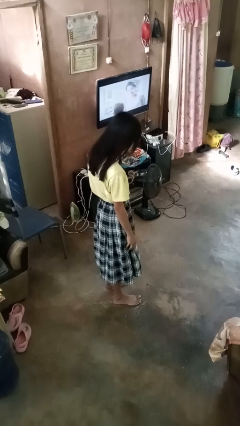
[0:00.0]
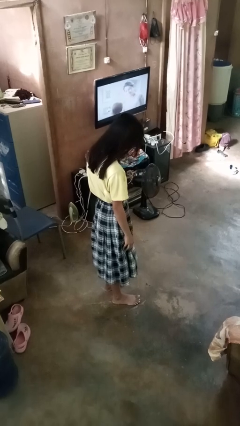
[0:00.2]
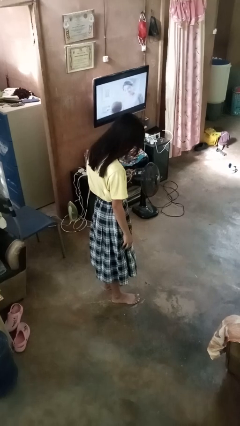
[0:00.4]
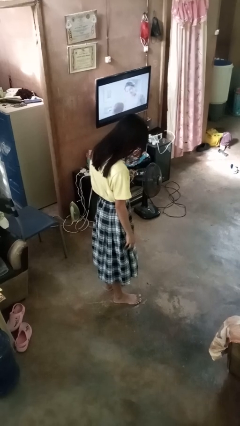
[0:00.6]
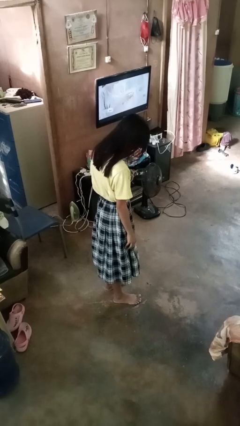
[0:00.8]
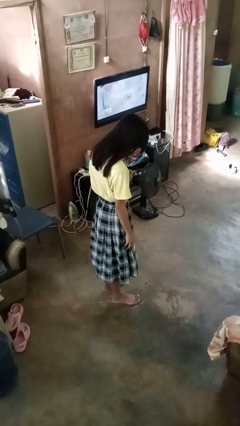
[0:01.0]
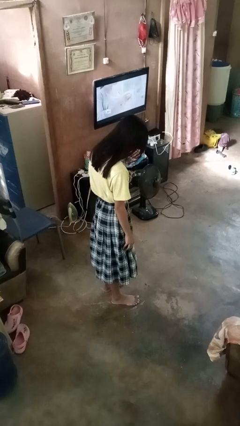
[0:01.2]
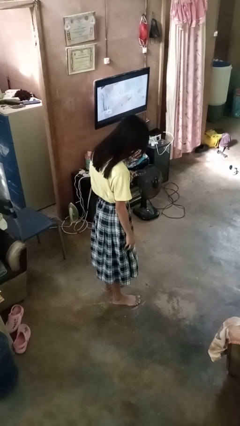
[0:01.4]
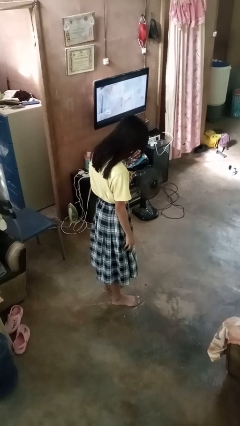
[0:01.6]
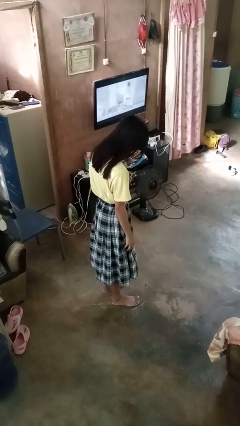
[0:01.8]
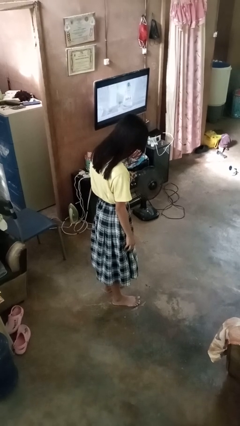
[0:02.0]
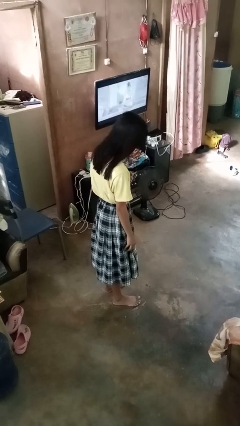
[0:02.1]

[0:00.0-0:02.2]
person bows

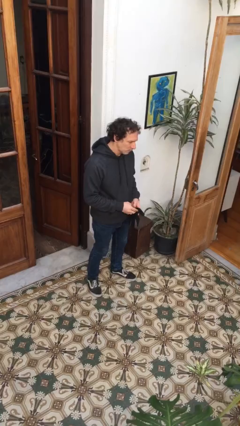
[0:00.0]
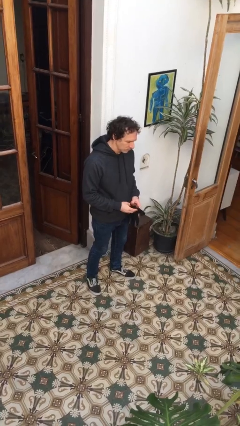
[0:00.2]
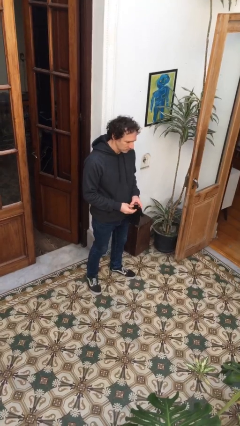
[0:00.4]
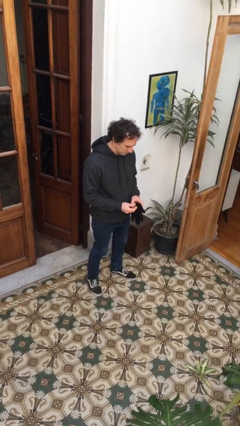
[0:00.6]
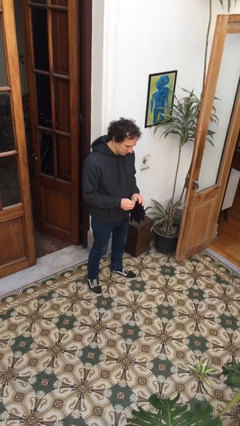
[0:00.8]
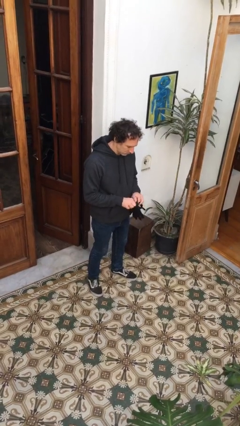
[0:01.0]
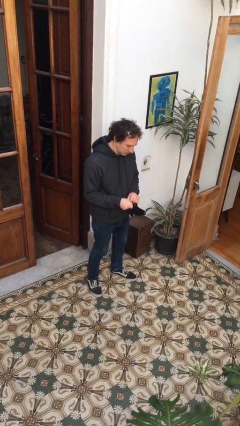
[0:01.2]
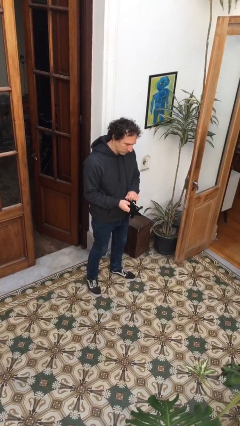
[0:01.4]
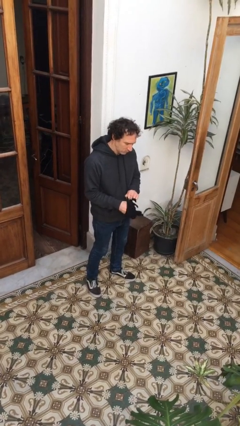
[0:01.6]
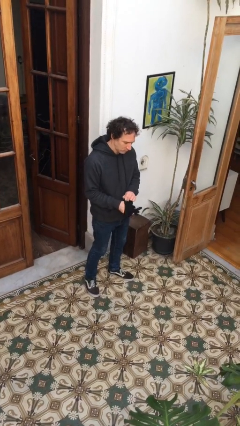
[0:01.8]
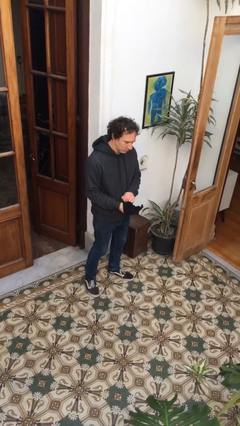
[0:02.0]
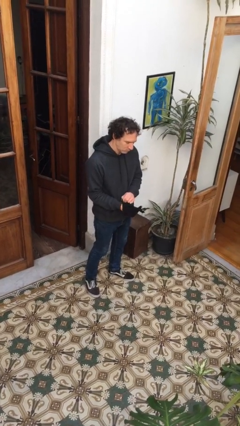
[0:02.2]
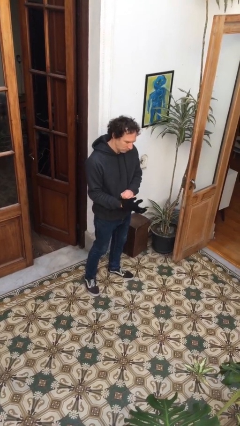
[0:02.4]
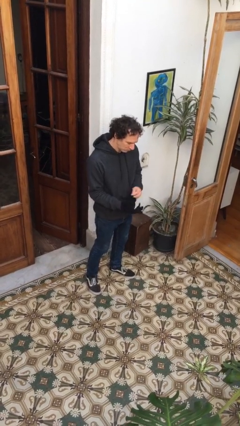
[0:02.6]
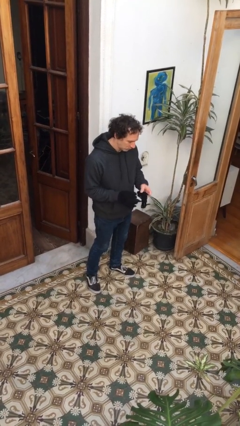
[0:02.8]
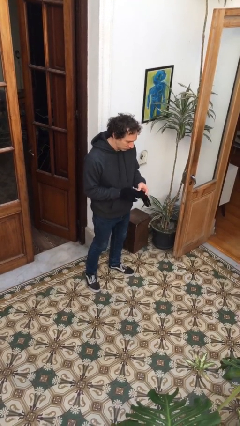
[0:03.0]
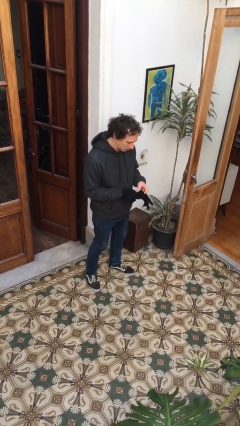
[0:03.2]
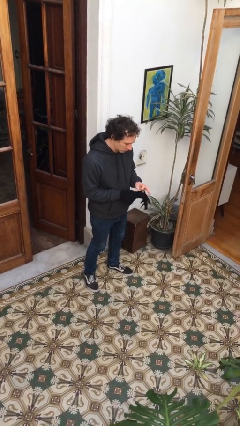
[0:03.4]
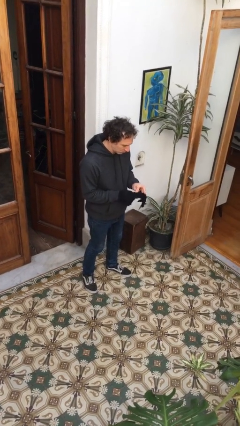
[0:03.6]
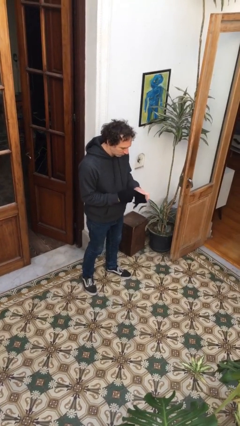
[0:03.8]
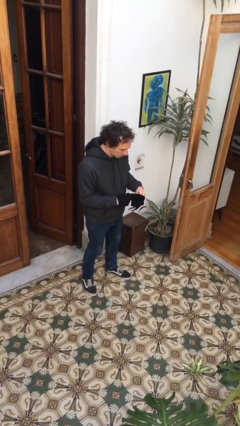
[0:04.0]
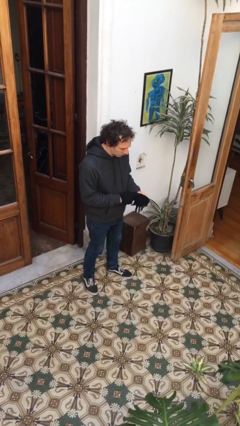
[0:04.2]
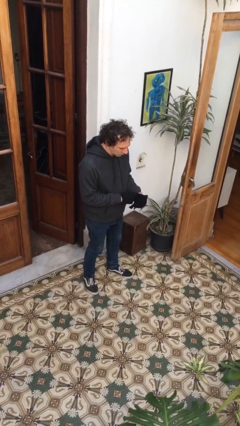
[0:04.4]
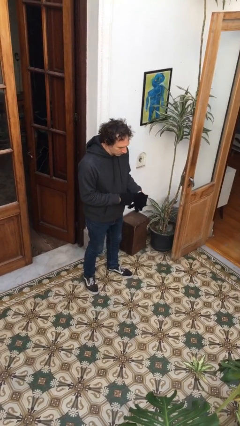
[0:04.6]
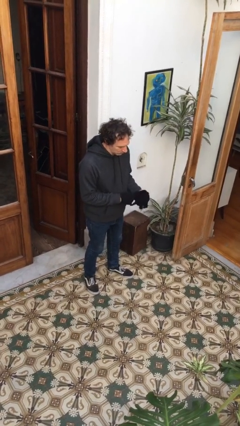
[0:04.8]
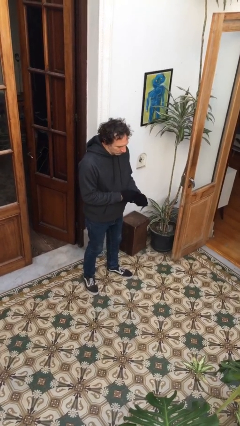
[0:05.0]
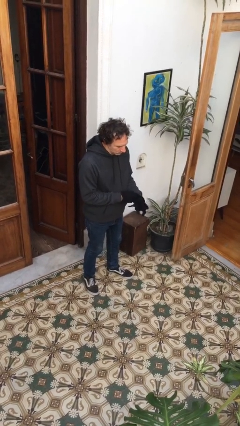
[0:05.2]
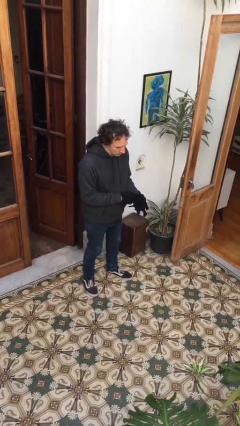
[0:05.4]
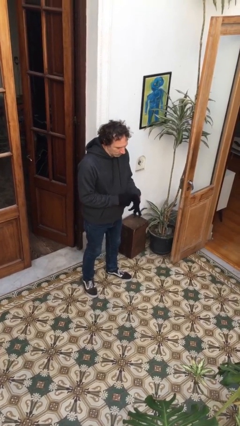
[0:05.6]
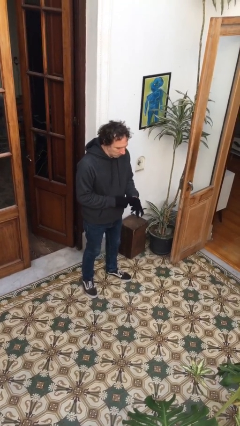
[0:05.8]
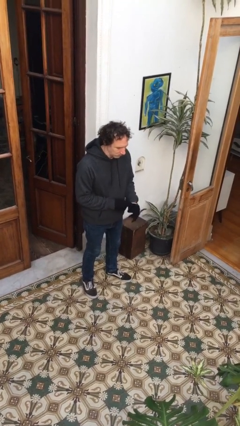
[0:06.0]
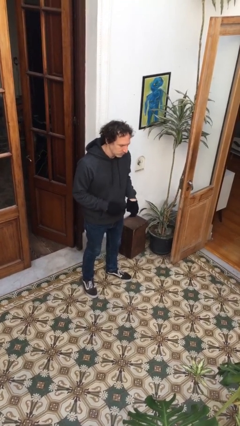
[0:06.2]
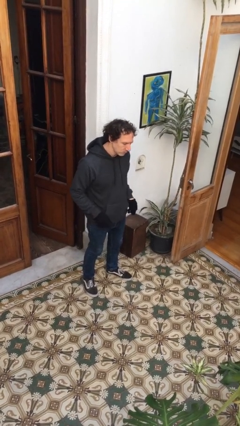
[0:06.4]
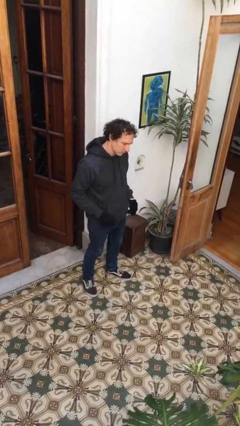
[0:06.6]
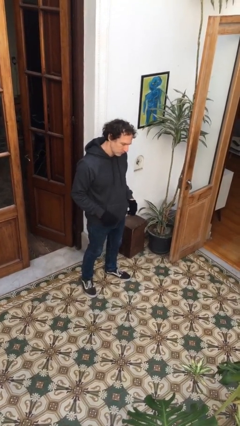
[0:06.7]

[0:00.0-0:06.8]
person puts on gloves

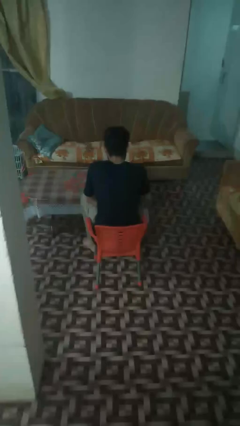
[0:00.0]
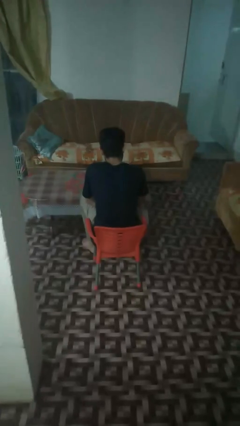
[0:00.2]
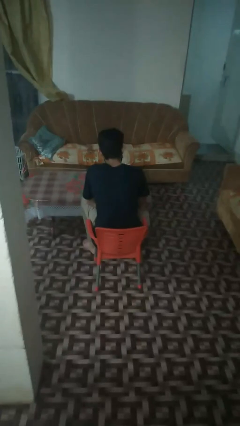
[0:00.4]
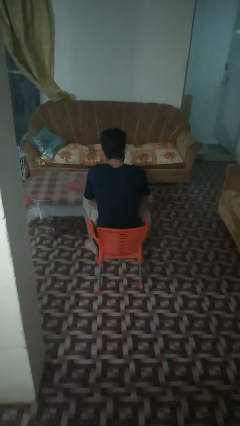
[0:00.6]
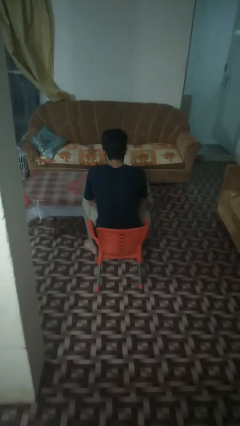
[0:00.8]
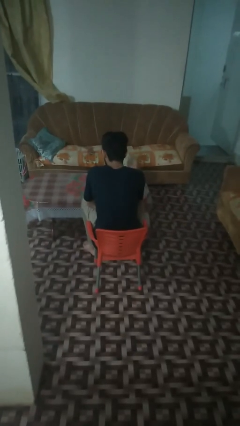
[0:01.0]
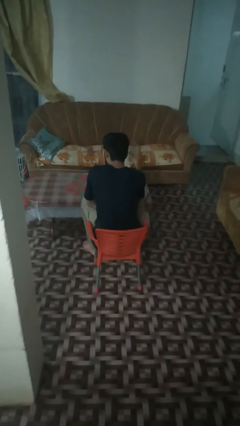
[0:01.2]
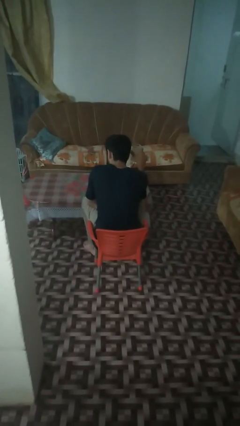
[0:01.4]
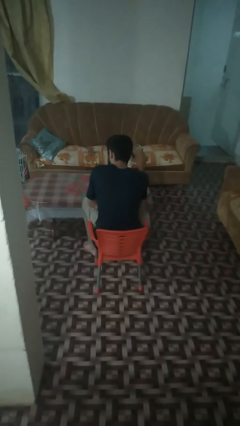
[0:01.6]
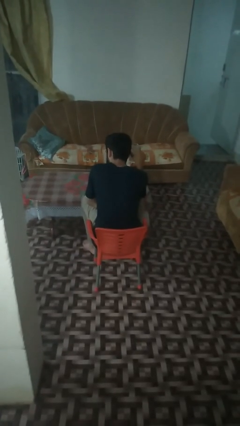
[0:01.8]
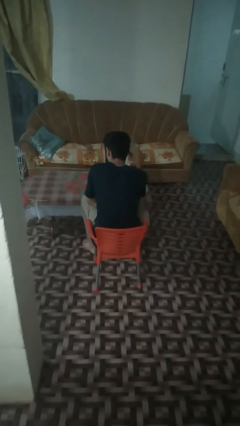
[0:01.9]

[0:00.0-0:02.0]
person picks up object from table

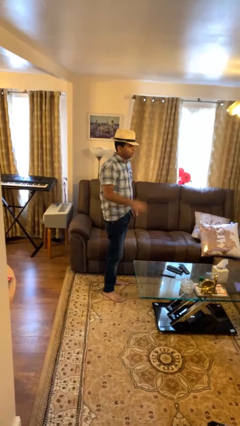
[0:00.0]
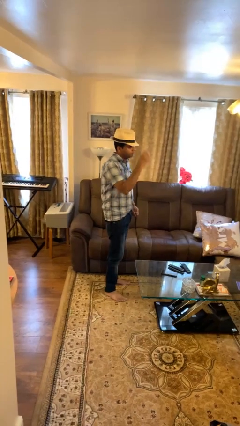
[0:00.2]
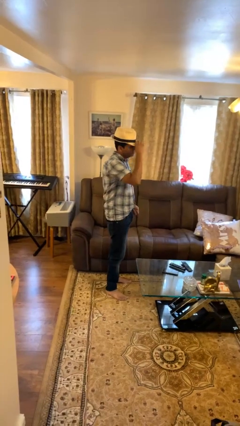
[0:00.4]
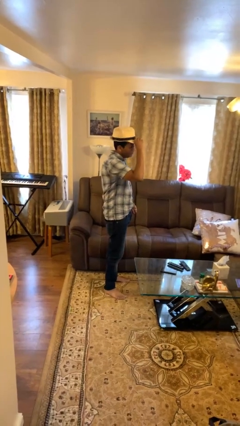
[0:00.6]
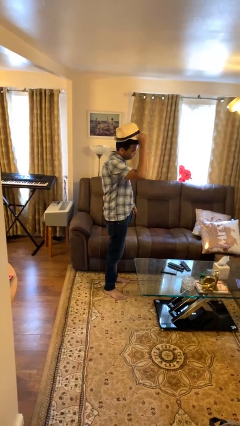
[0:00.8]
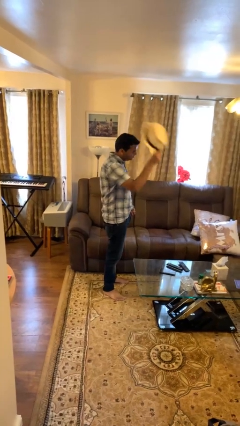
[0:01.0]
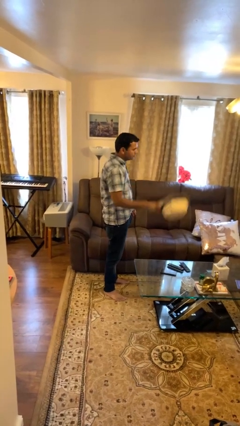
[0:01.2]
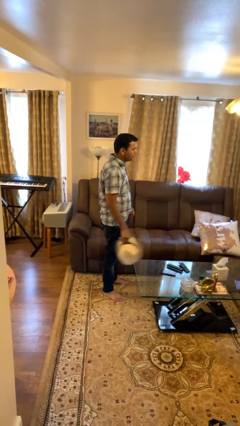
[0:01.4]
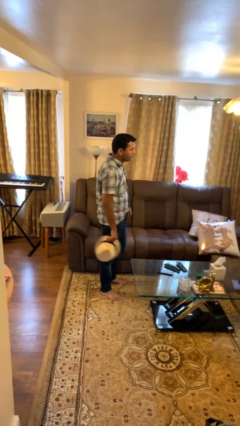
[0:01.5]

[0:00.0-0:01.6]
person takes off hat

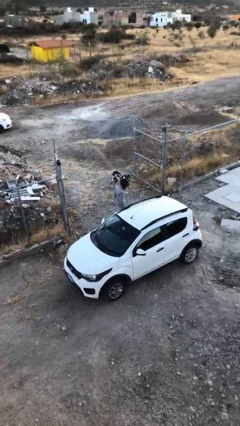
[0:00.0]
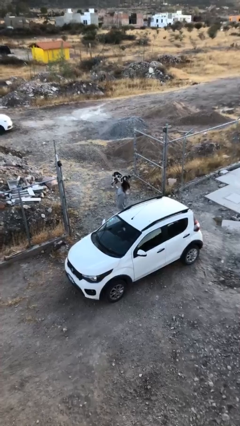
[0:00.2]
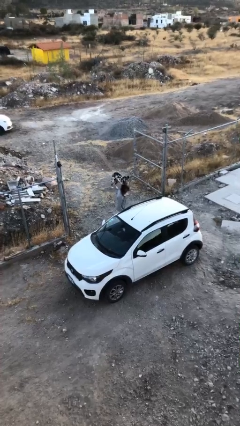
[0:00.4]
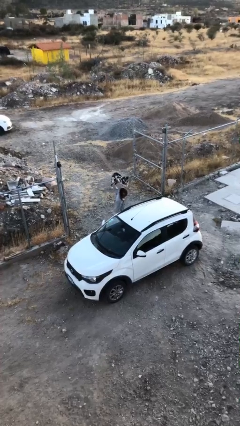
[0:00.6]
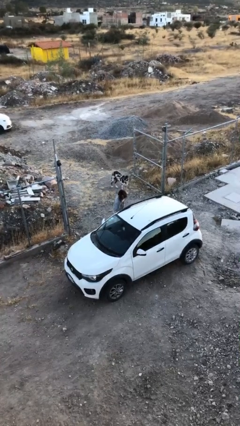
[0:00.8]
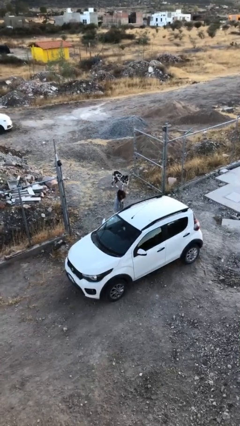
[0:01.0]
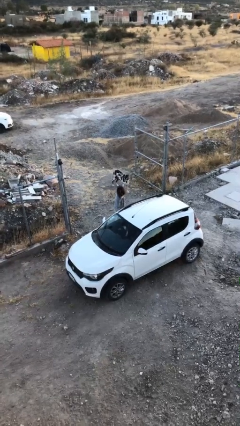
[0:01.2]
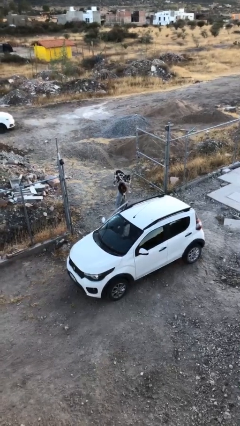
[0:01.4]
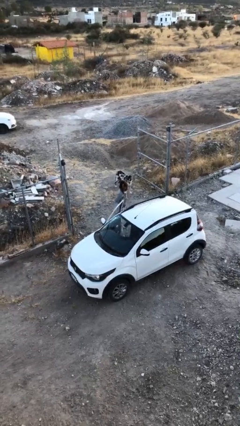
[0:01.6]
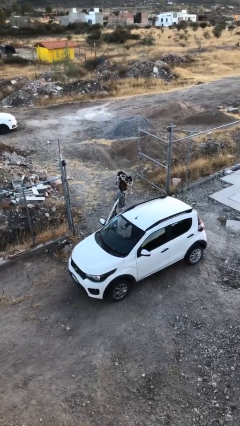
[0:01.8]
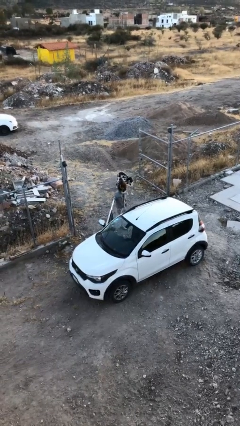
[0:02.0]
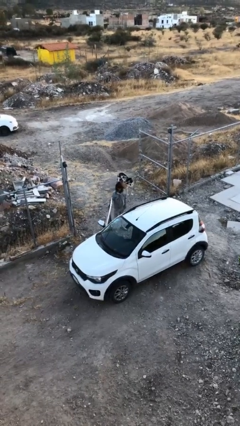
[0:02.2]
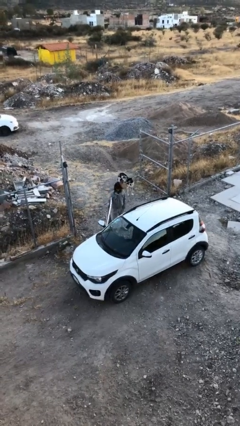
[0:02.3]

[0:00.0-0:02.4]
person opens car door

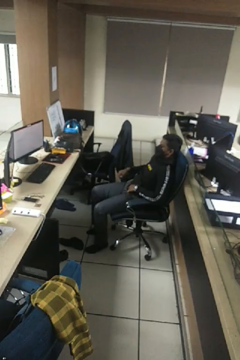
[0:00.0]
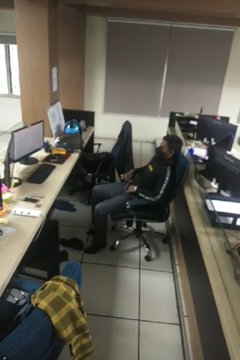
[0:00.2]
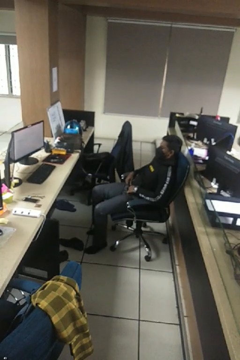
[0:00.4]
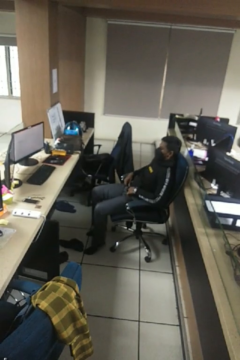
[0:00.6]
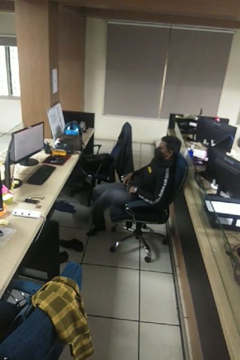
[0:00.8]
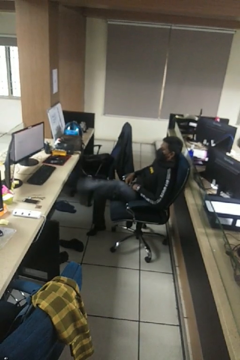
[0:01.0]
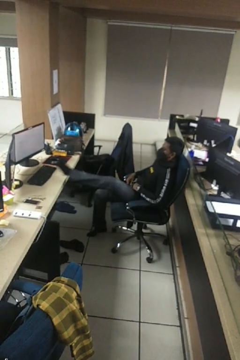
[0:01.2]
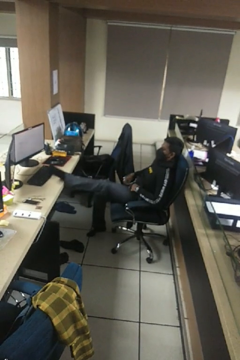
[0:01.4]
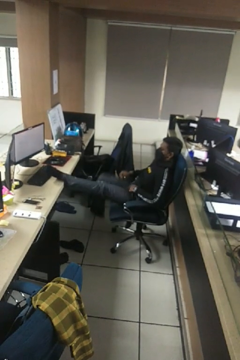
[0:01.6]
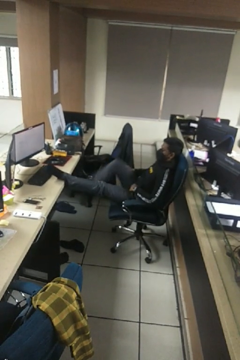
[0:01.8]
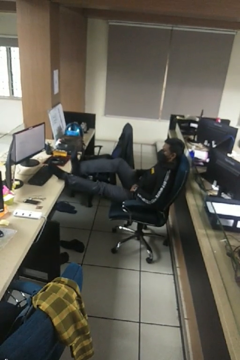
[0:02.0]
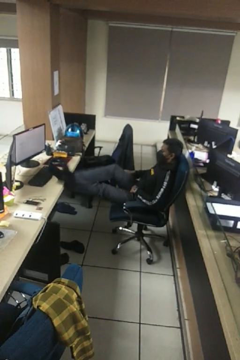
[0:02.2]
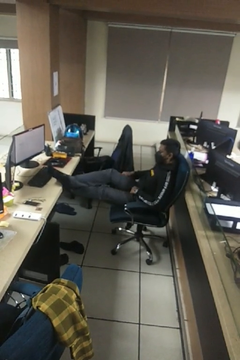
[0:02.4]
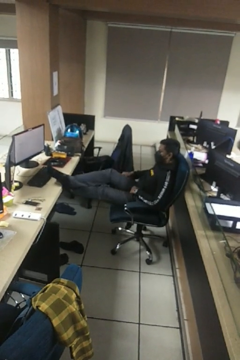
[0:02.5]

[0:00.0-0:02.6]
person puts feet up

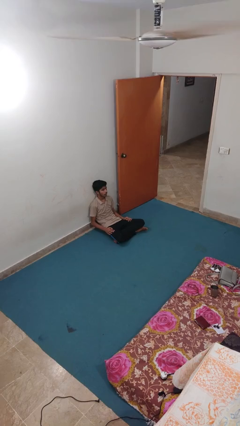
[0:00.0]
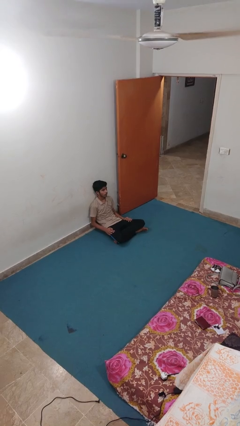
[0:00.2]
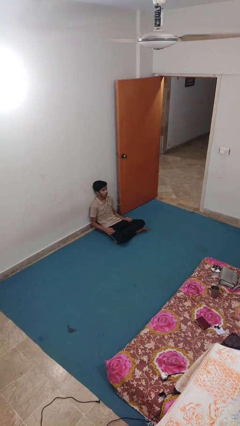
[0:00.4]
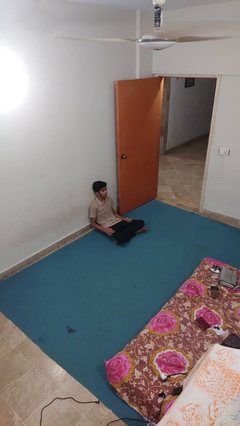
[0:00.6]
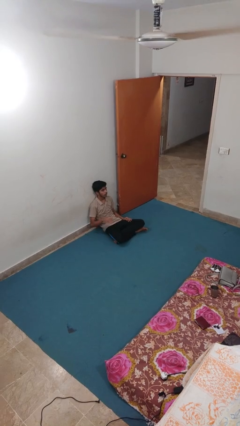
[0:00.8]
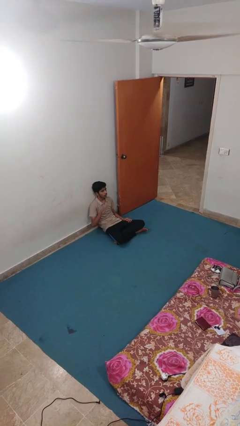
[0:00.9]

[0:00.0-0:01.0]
person slaps hands on thighs
